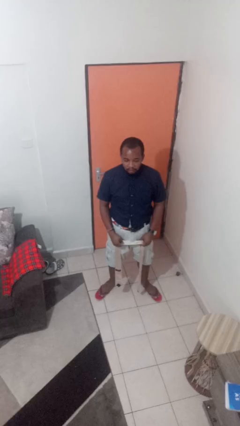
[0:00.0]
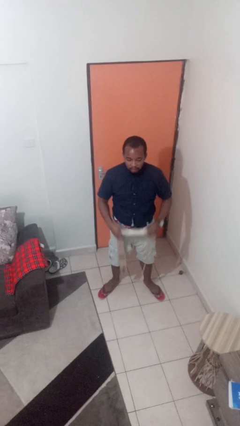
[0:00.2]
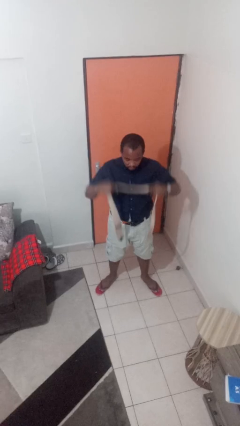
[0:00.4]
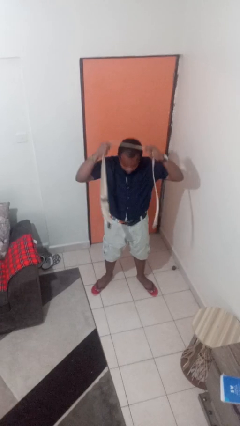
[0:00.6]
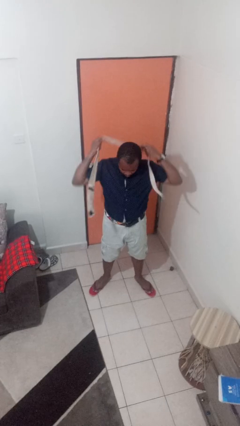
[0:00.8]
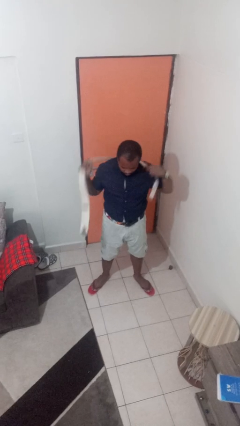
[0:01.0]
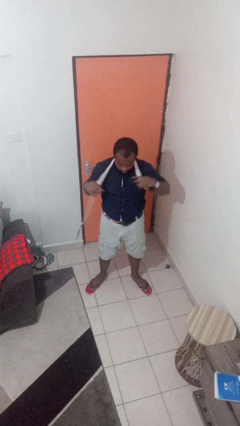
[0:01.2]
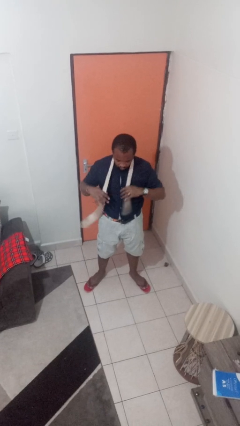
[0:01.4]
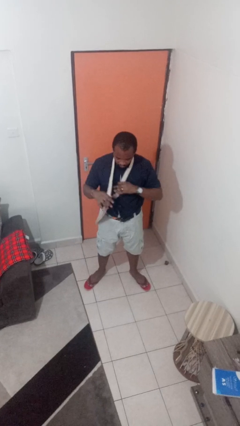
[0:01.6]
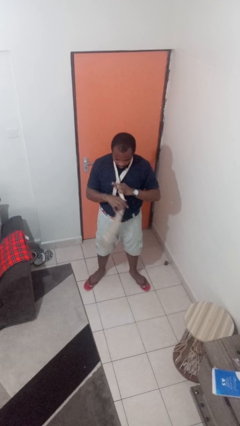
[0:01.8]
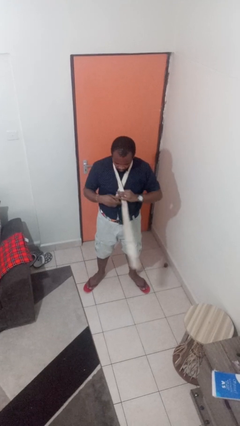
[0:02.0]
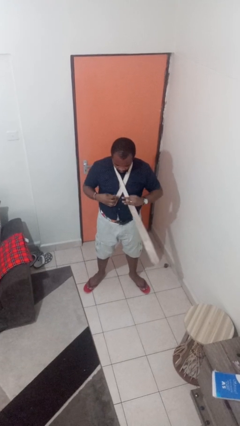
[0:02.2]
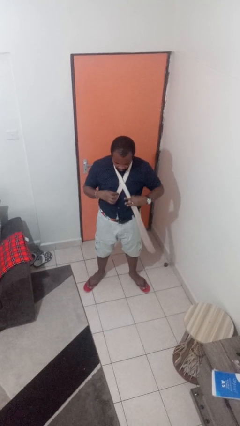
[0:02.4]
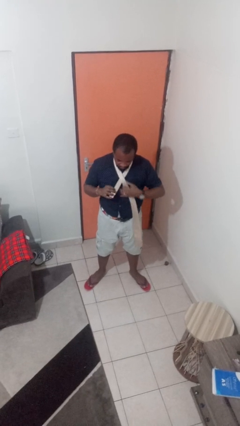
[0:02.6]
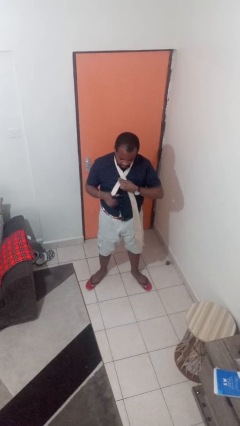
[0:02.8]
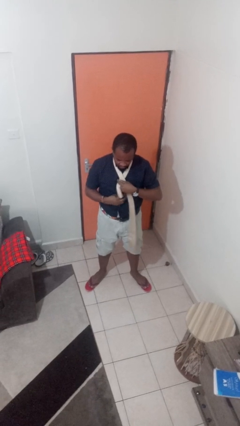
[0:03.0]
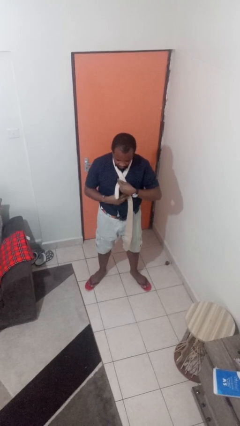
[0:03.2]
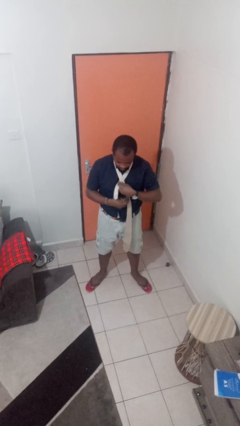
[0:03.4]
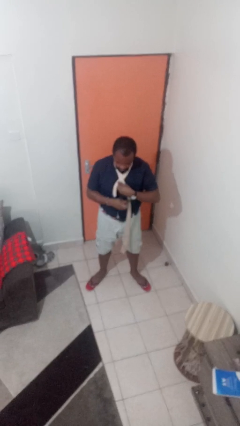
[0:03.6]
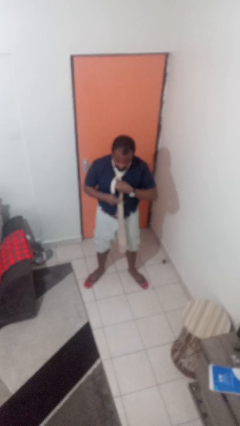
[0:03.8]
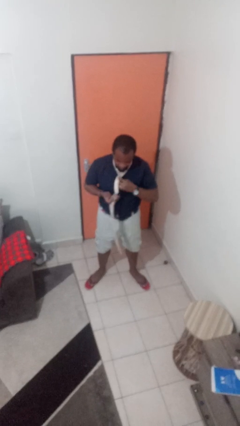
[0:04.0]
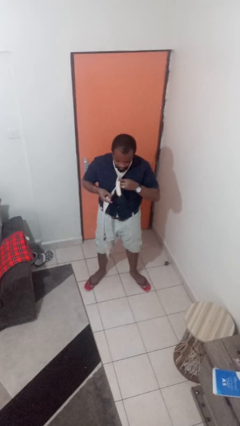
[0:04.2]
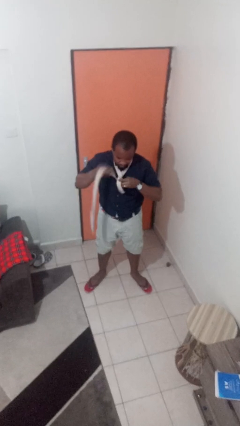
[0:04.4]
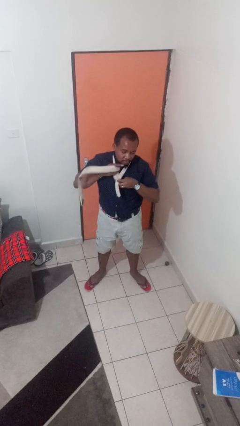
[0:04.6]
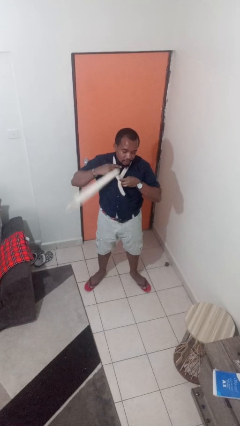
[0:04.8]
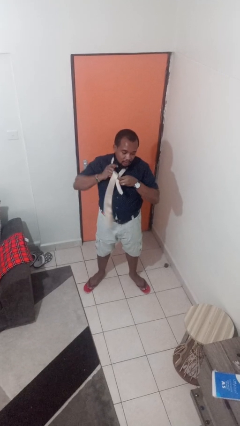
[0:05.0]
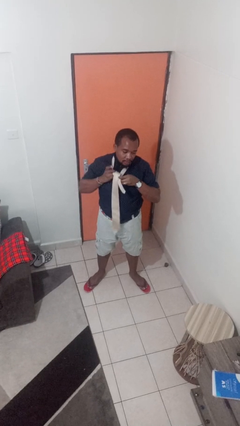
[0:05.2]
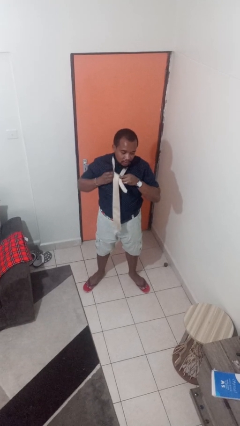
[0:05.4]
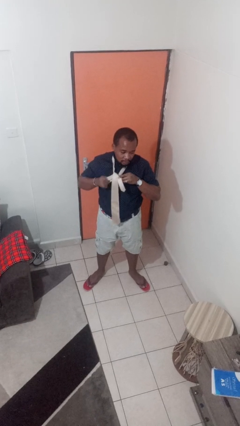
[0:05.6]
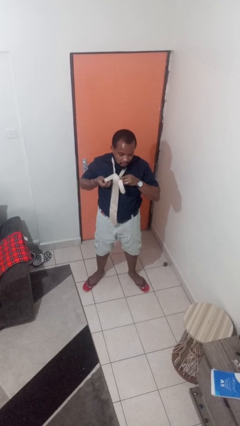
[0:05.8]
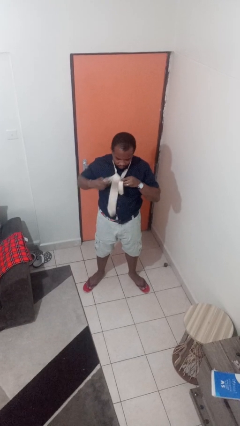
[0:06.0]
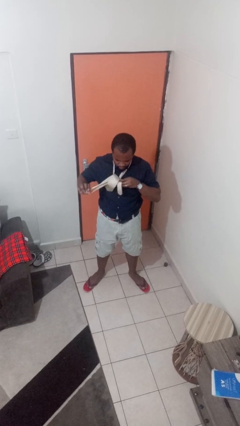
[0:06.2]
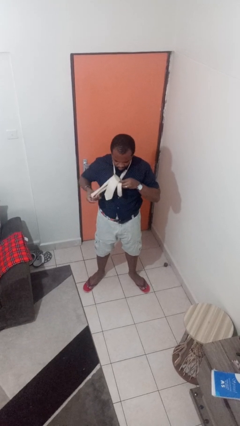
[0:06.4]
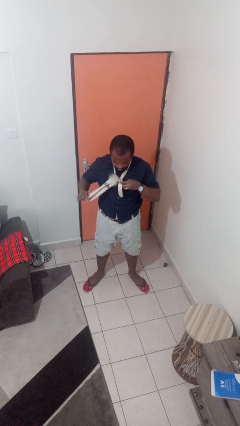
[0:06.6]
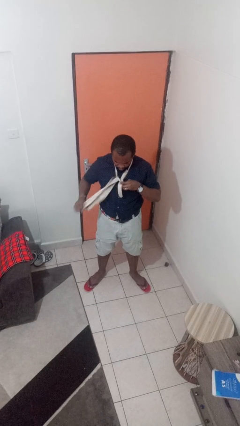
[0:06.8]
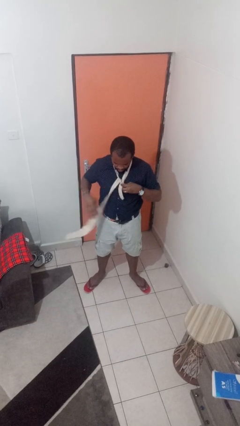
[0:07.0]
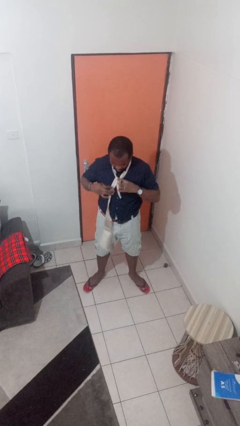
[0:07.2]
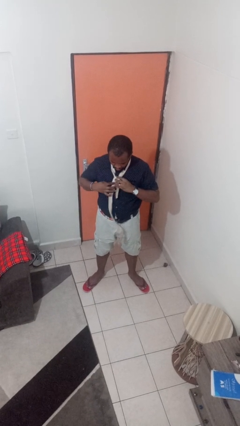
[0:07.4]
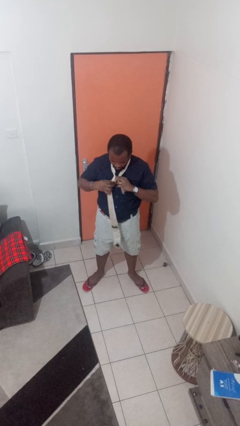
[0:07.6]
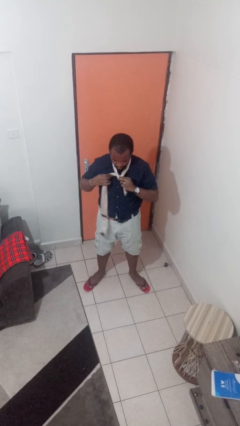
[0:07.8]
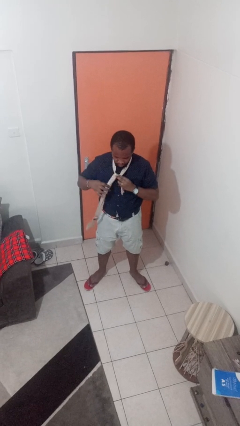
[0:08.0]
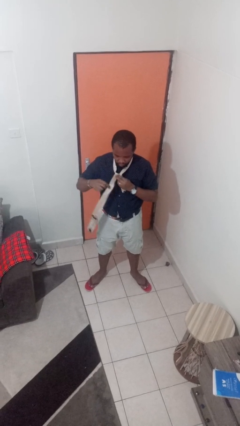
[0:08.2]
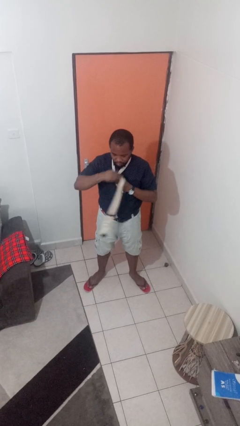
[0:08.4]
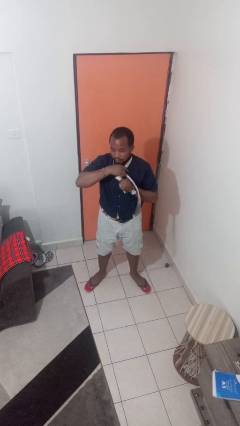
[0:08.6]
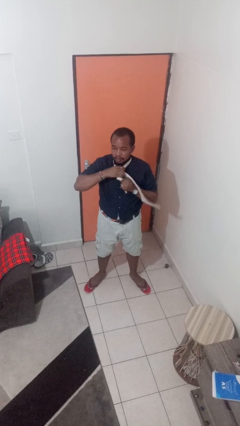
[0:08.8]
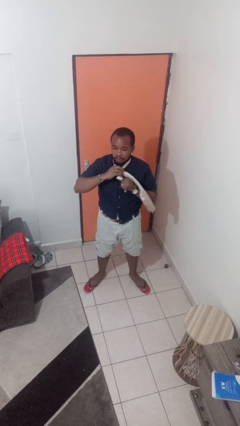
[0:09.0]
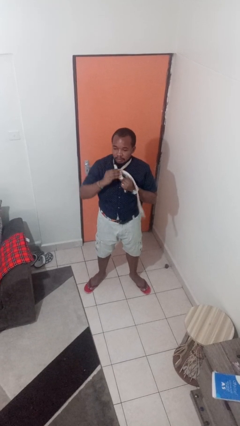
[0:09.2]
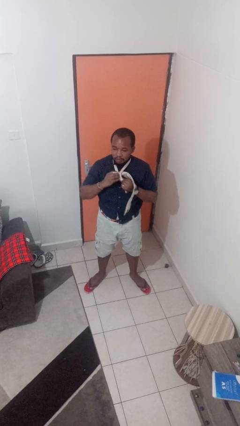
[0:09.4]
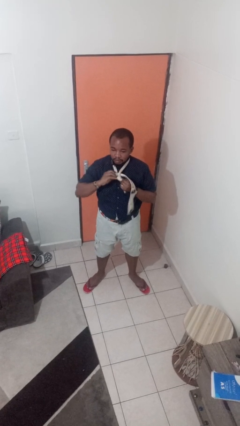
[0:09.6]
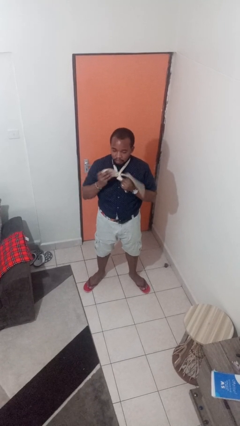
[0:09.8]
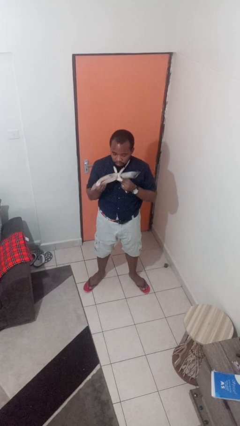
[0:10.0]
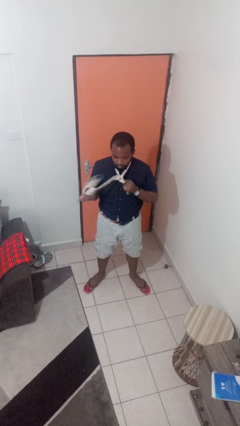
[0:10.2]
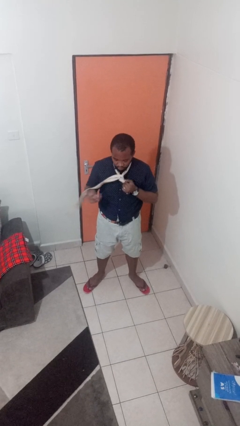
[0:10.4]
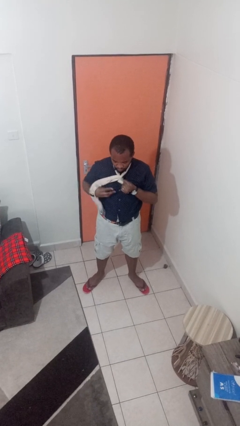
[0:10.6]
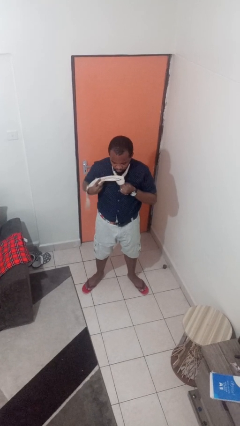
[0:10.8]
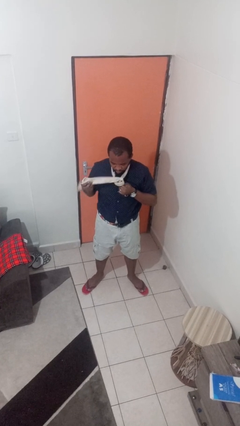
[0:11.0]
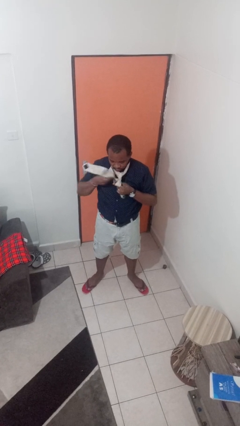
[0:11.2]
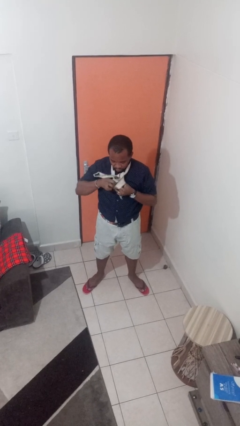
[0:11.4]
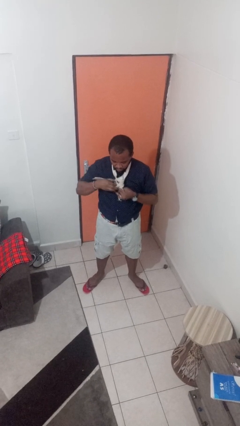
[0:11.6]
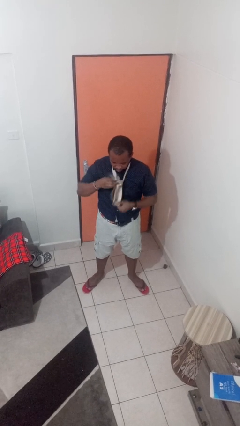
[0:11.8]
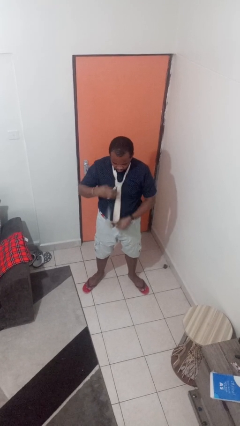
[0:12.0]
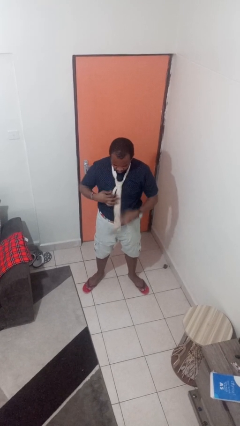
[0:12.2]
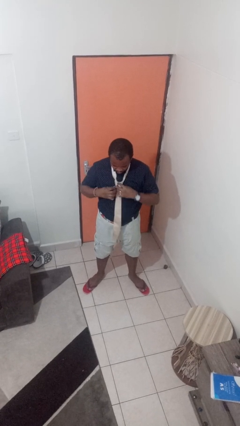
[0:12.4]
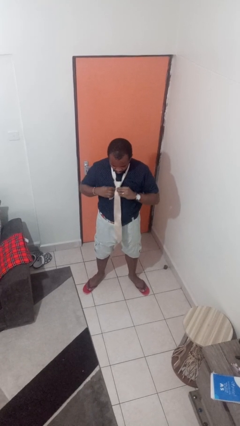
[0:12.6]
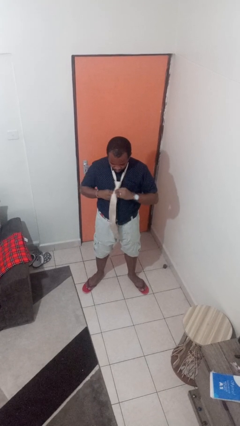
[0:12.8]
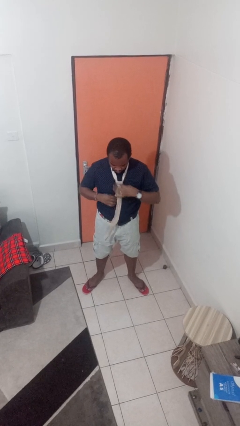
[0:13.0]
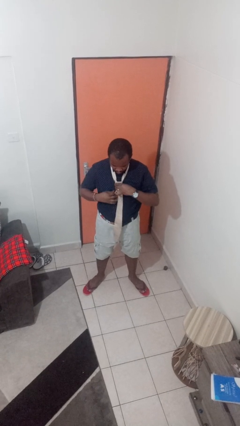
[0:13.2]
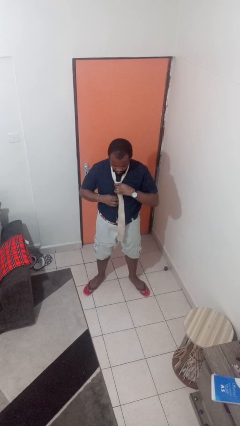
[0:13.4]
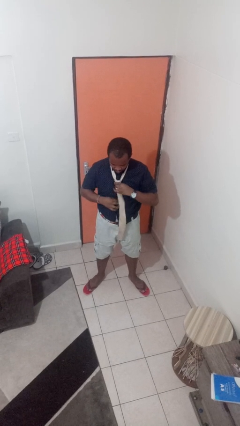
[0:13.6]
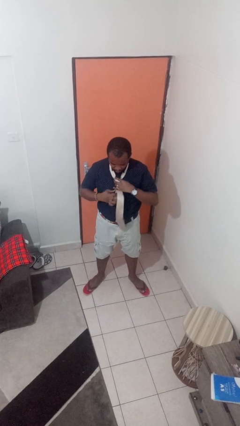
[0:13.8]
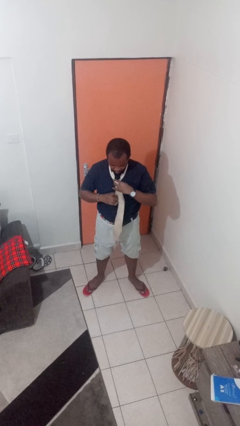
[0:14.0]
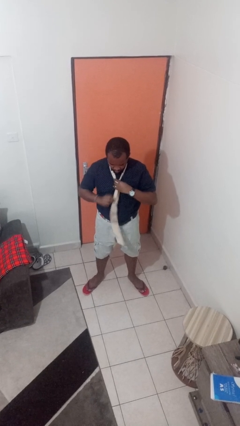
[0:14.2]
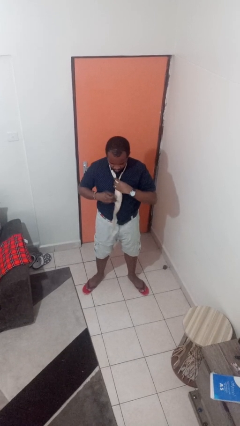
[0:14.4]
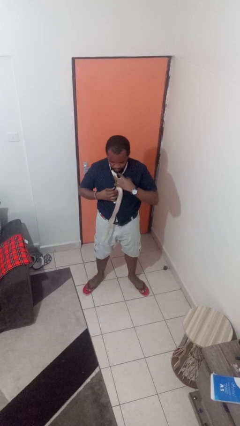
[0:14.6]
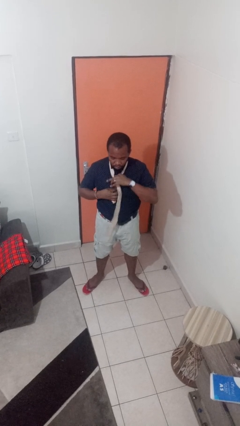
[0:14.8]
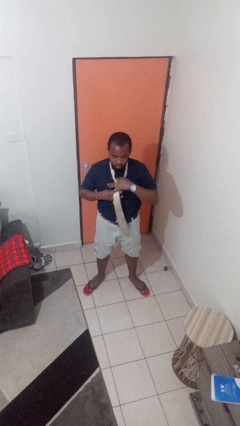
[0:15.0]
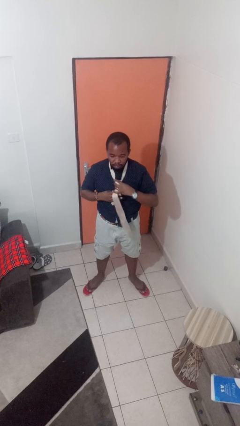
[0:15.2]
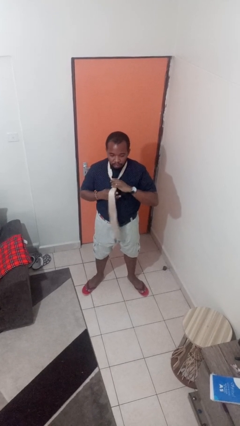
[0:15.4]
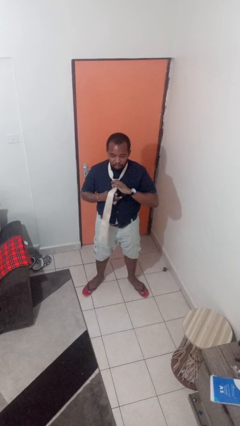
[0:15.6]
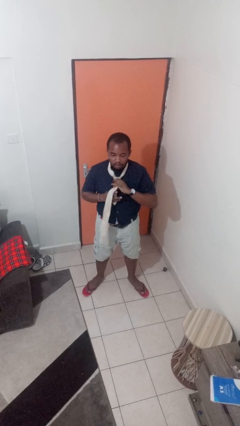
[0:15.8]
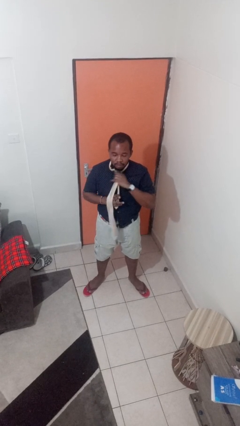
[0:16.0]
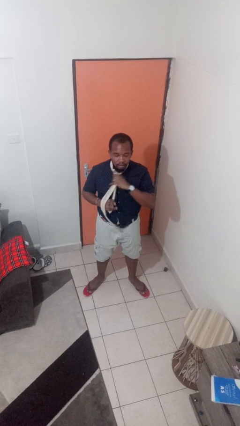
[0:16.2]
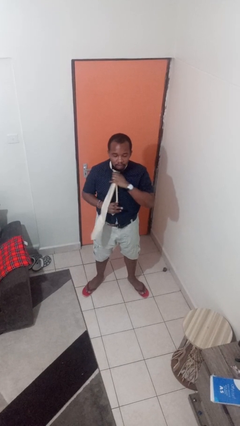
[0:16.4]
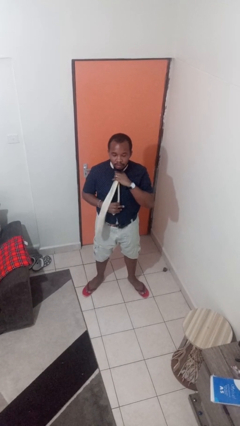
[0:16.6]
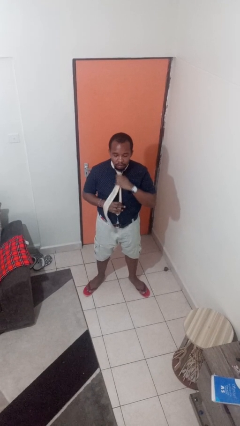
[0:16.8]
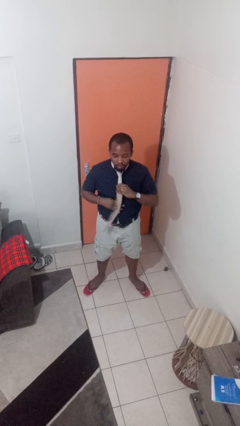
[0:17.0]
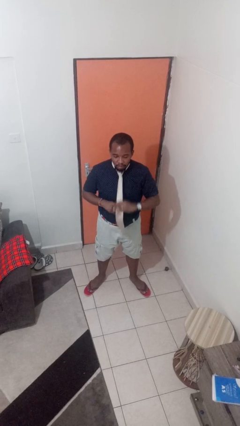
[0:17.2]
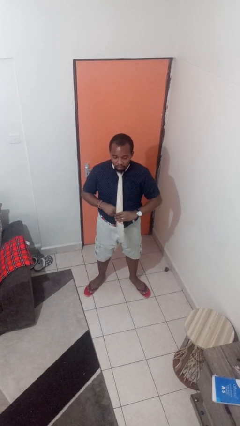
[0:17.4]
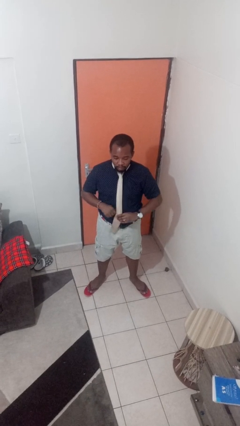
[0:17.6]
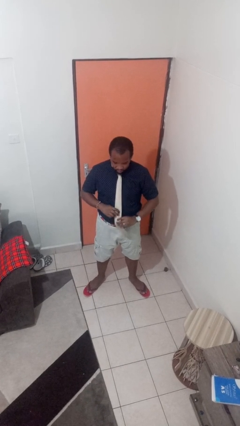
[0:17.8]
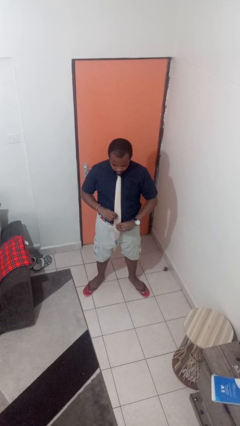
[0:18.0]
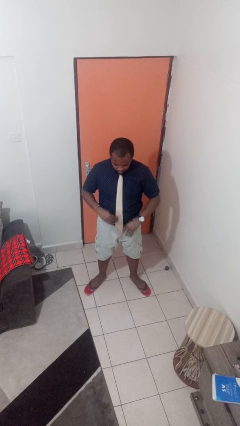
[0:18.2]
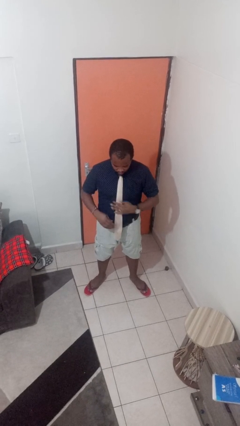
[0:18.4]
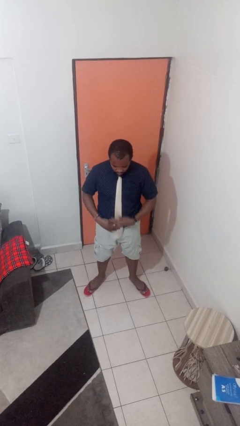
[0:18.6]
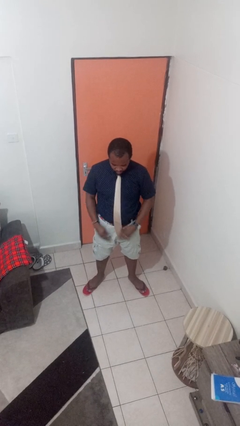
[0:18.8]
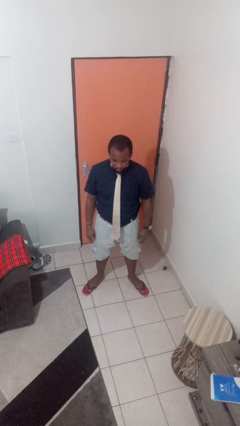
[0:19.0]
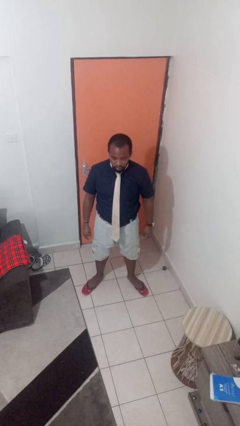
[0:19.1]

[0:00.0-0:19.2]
person puts on necktie
